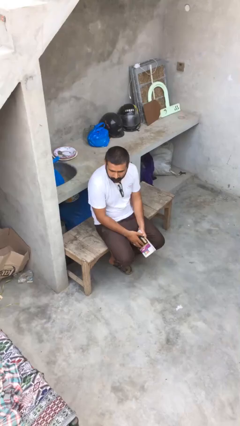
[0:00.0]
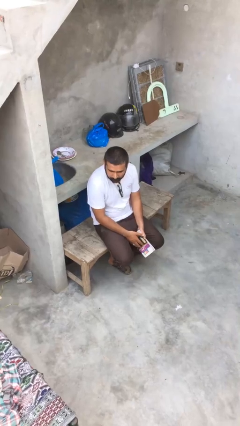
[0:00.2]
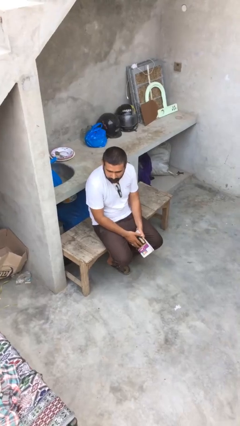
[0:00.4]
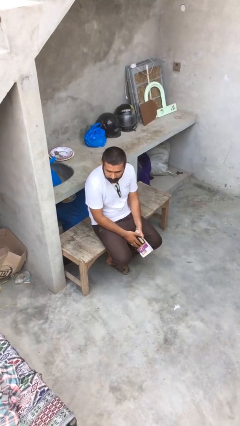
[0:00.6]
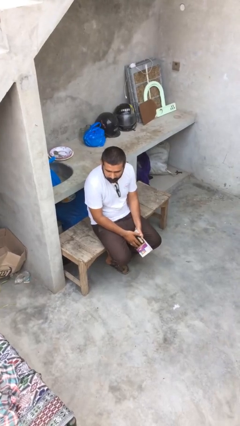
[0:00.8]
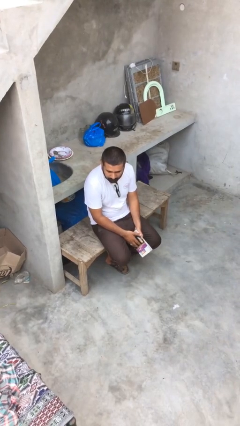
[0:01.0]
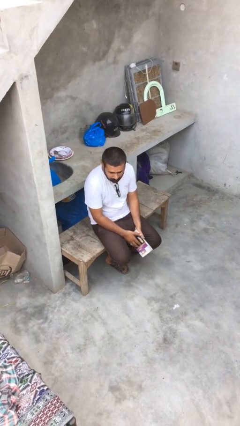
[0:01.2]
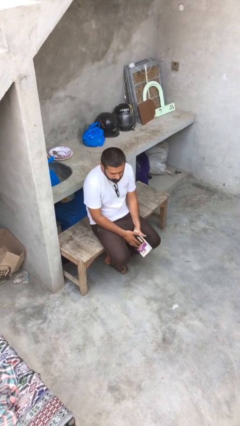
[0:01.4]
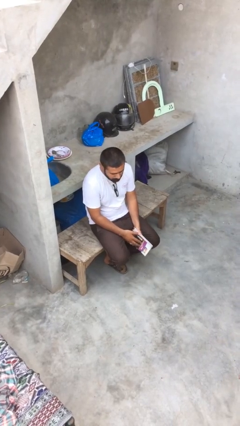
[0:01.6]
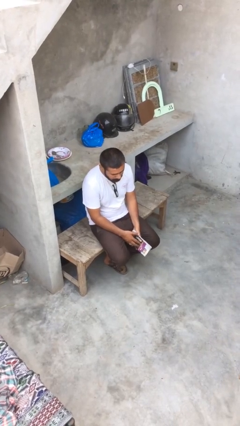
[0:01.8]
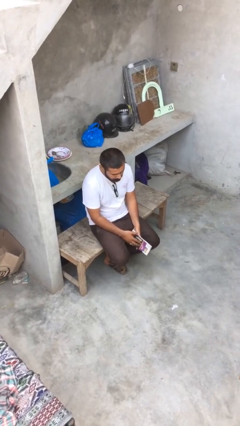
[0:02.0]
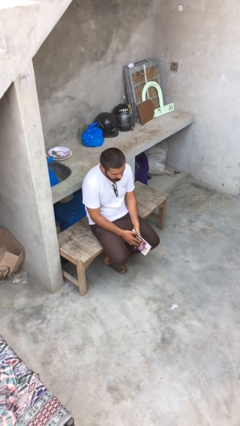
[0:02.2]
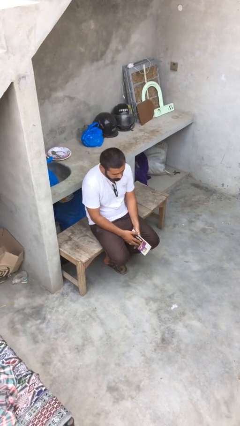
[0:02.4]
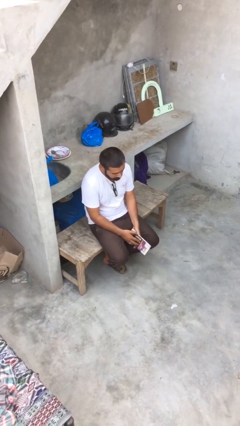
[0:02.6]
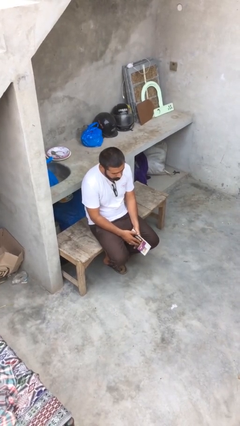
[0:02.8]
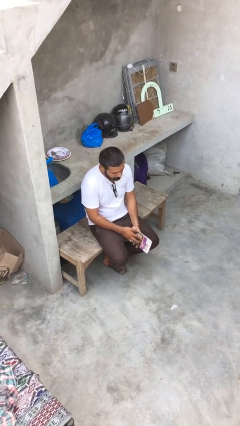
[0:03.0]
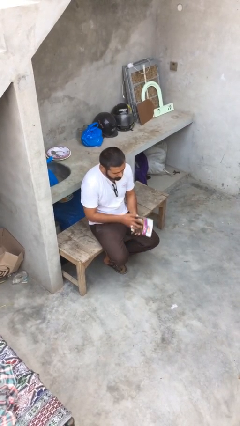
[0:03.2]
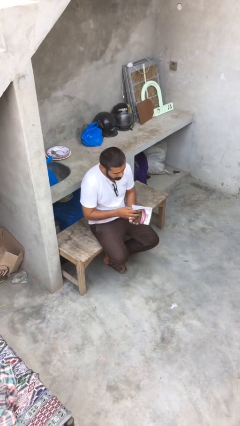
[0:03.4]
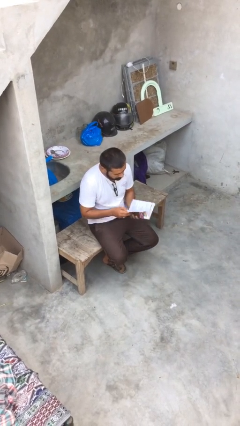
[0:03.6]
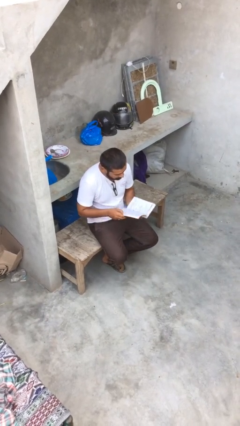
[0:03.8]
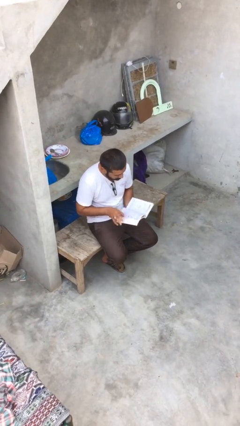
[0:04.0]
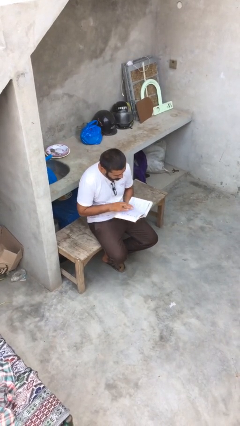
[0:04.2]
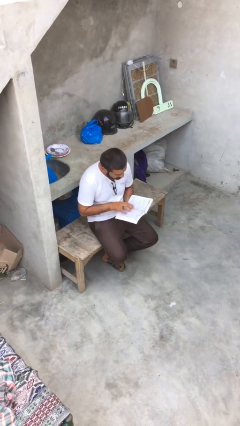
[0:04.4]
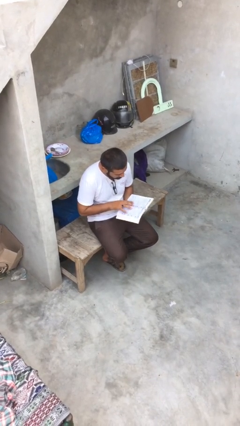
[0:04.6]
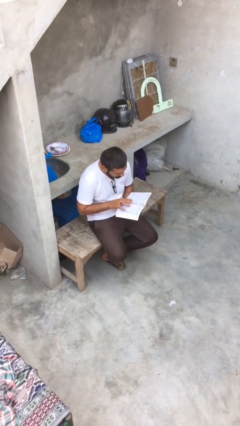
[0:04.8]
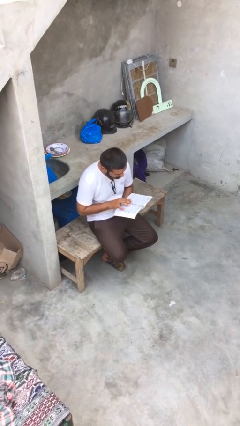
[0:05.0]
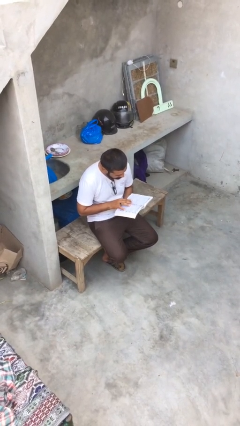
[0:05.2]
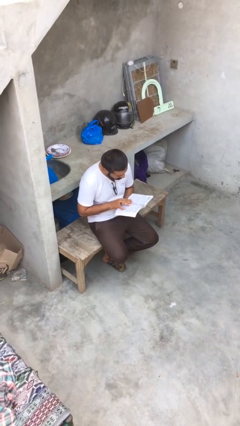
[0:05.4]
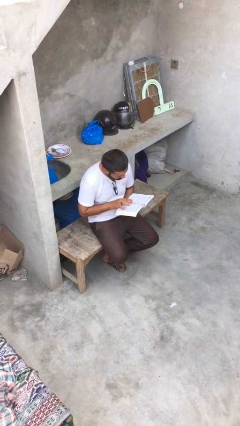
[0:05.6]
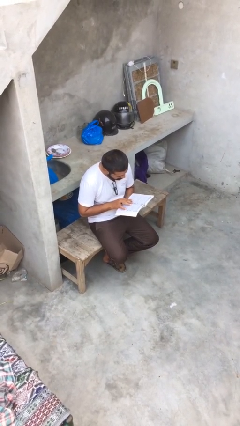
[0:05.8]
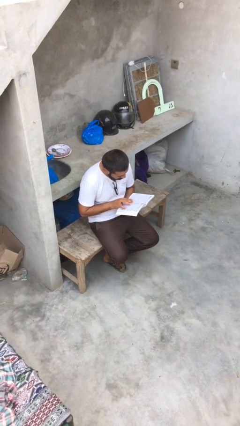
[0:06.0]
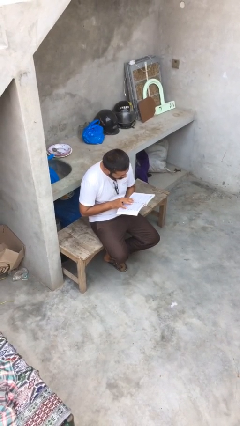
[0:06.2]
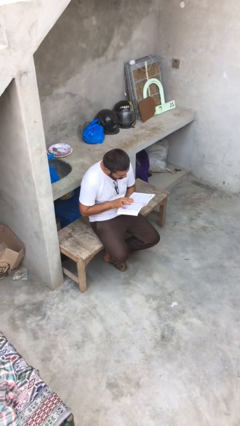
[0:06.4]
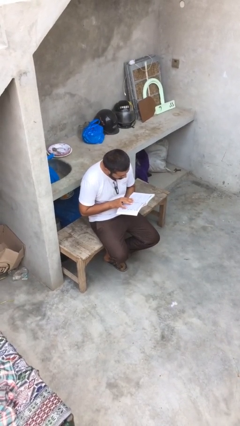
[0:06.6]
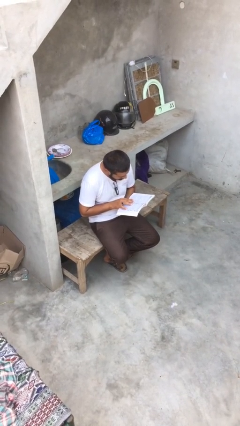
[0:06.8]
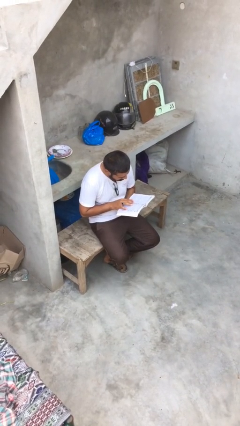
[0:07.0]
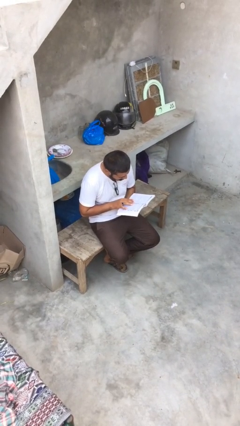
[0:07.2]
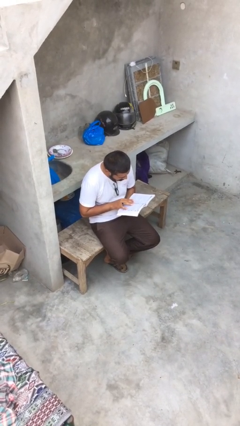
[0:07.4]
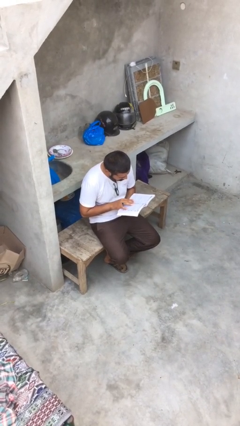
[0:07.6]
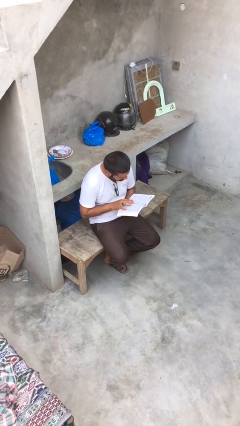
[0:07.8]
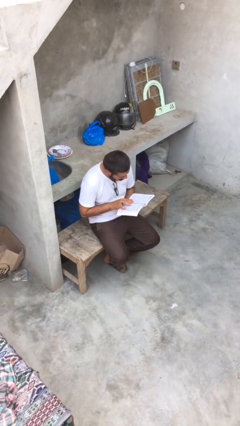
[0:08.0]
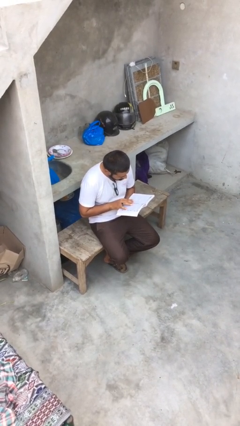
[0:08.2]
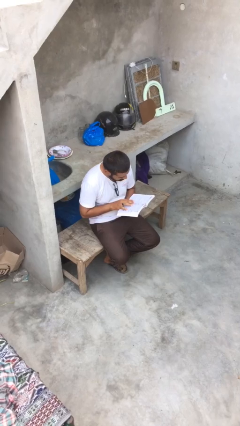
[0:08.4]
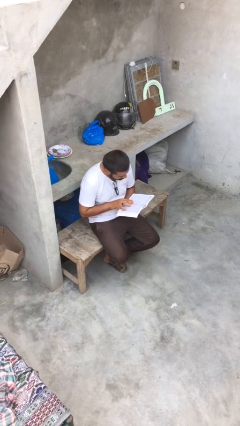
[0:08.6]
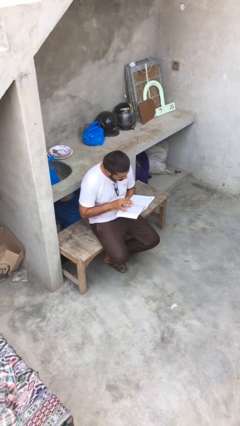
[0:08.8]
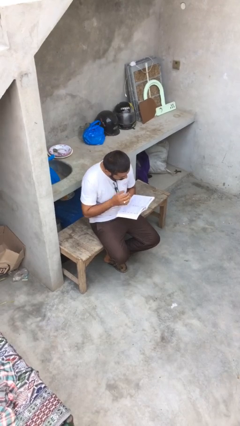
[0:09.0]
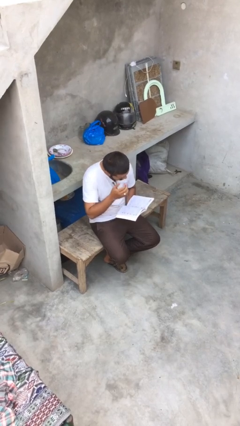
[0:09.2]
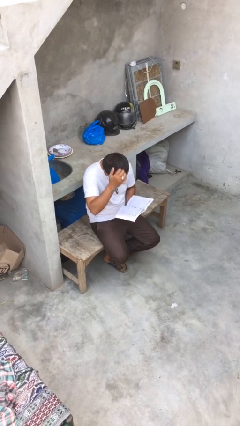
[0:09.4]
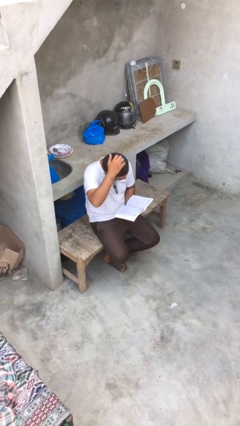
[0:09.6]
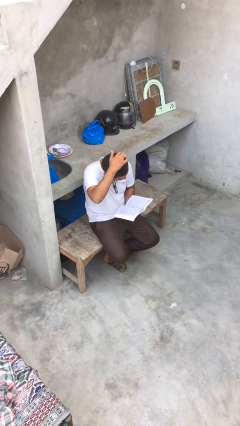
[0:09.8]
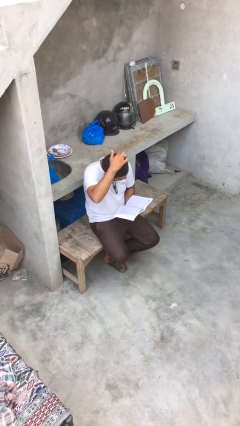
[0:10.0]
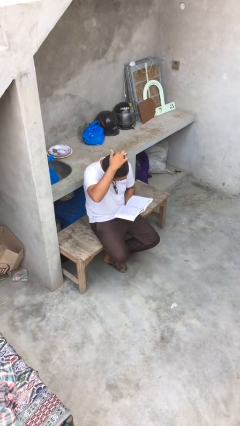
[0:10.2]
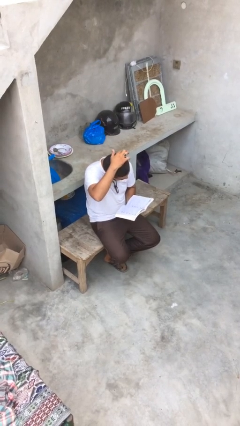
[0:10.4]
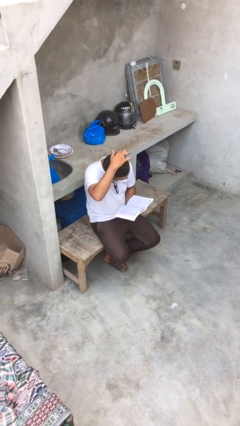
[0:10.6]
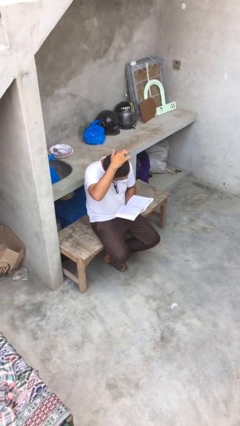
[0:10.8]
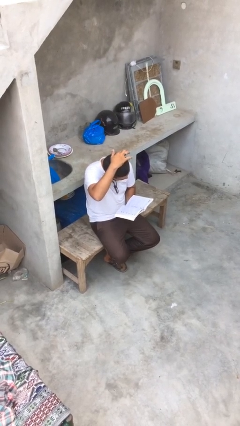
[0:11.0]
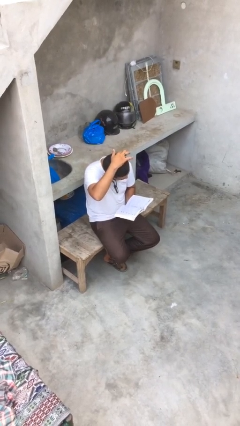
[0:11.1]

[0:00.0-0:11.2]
person reads document

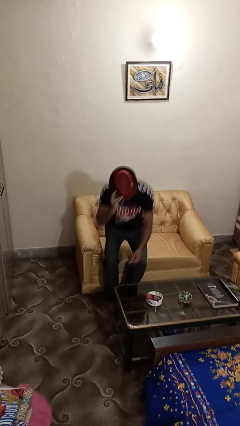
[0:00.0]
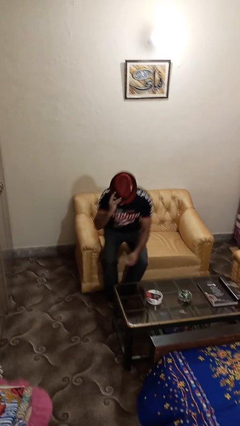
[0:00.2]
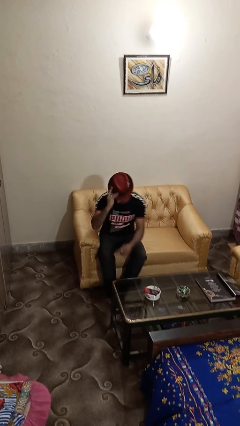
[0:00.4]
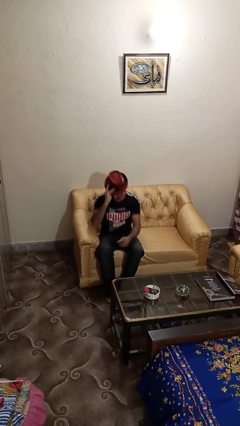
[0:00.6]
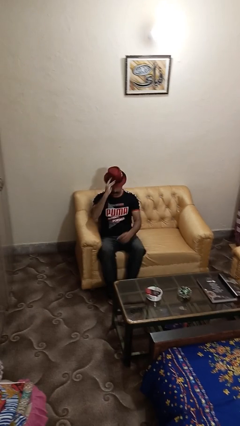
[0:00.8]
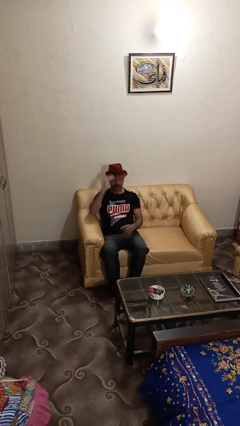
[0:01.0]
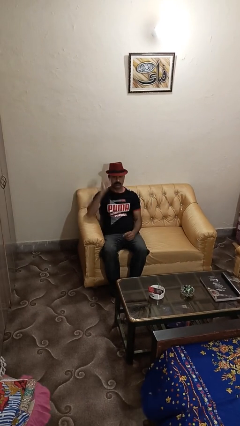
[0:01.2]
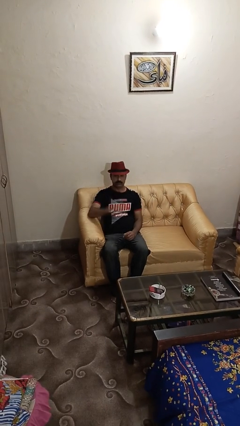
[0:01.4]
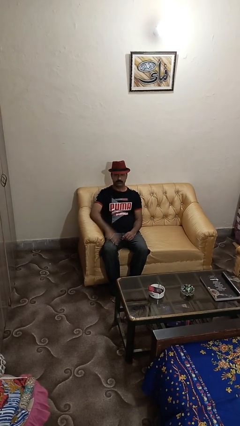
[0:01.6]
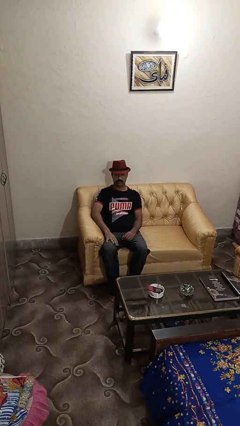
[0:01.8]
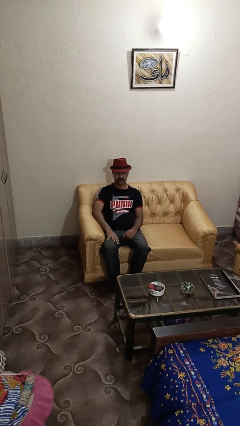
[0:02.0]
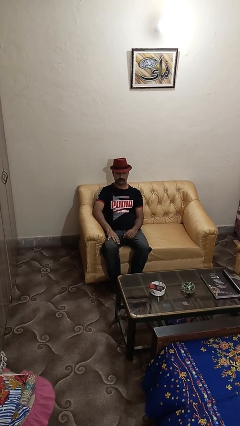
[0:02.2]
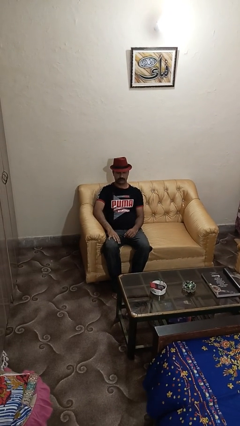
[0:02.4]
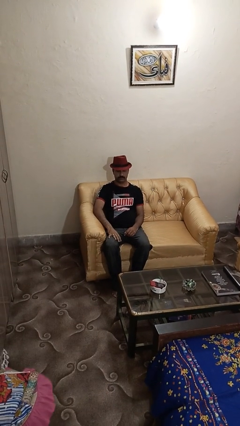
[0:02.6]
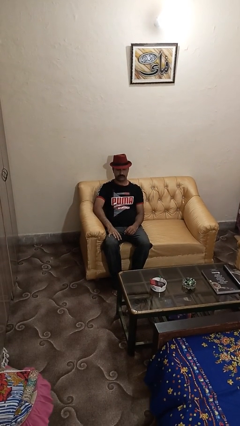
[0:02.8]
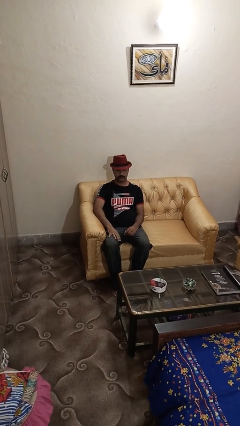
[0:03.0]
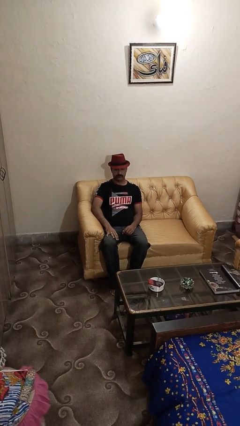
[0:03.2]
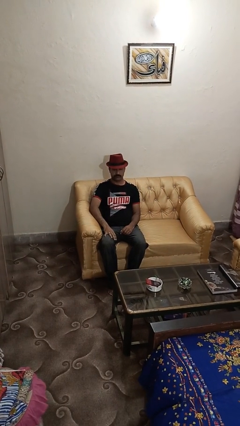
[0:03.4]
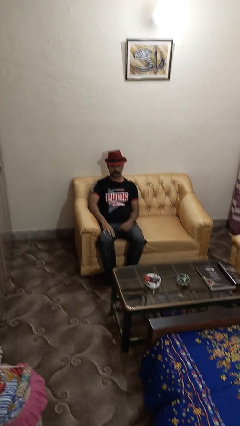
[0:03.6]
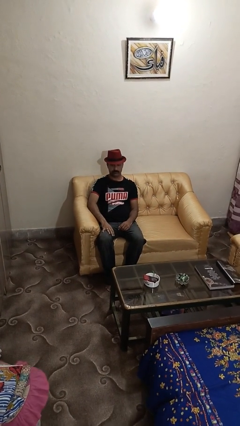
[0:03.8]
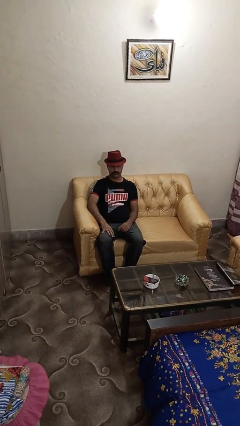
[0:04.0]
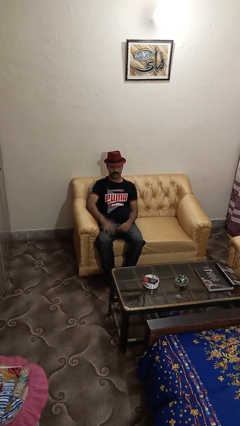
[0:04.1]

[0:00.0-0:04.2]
person puts on hat

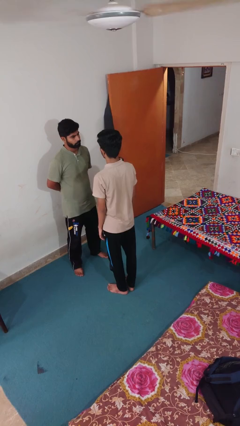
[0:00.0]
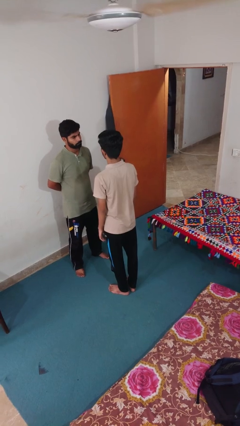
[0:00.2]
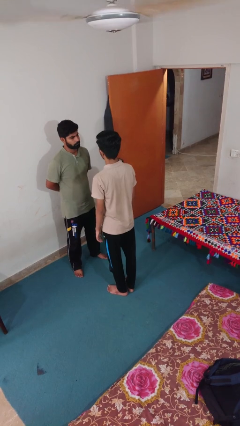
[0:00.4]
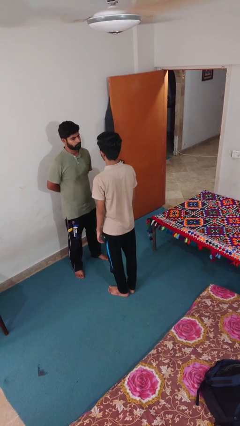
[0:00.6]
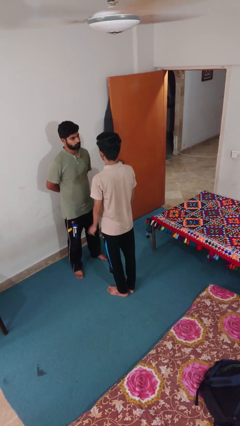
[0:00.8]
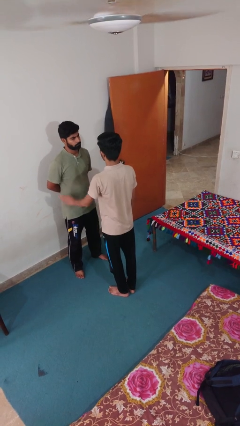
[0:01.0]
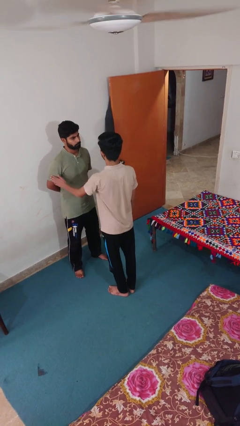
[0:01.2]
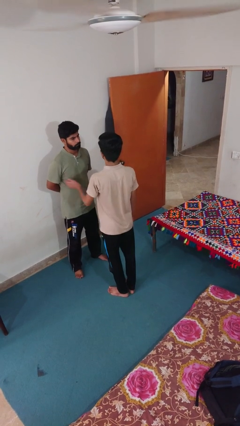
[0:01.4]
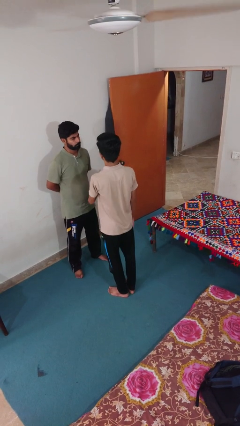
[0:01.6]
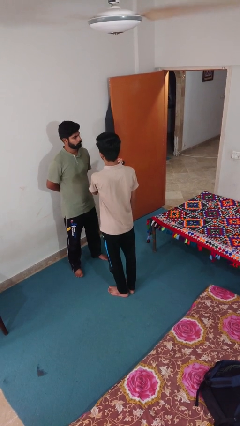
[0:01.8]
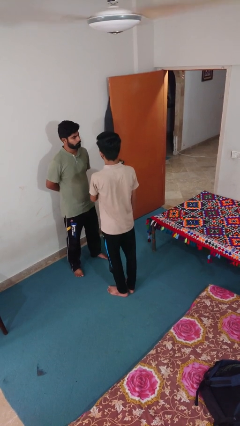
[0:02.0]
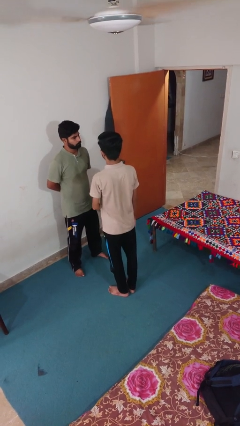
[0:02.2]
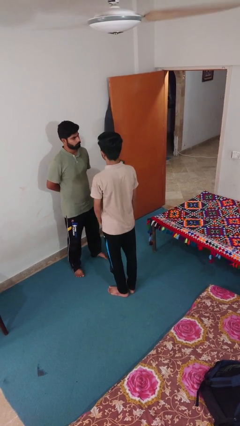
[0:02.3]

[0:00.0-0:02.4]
person shoves person
